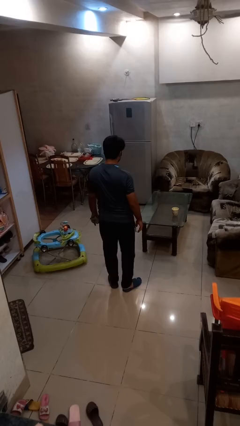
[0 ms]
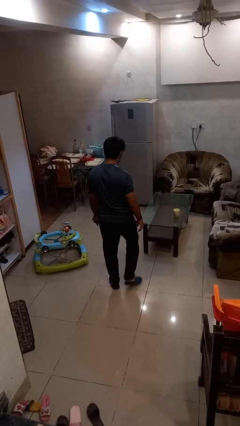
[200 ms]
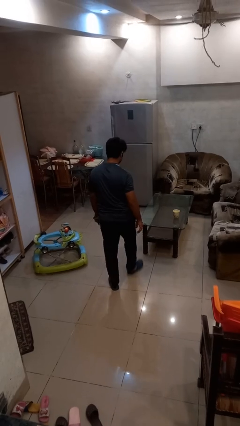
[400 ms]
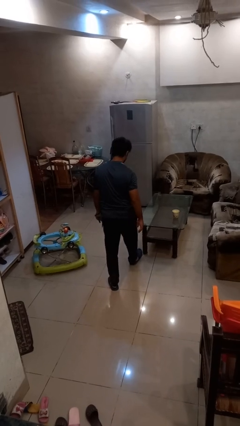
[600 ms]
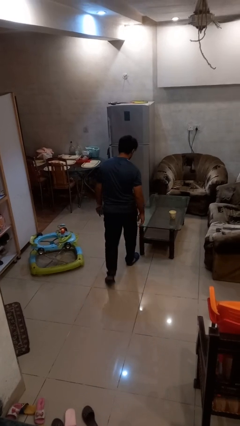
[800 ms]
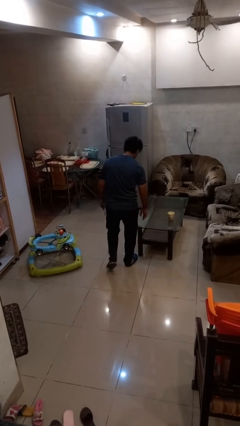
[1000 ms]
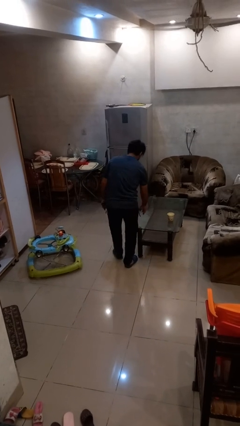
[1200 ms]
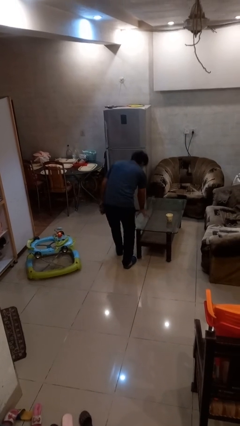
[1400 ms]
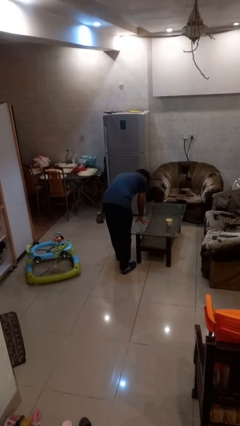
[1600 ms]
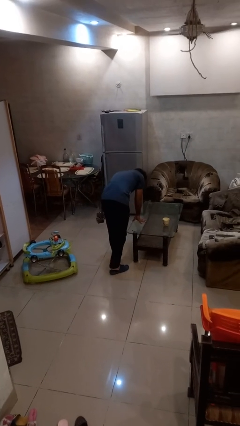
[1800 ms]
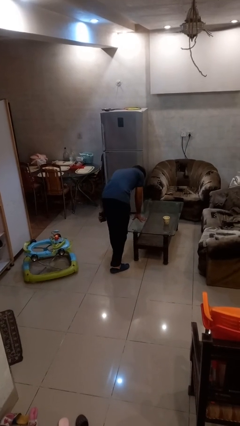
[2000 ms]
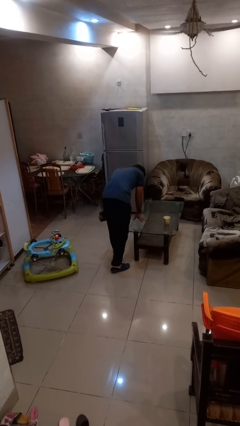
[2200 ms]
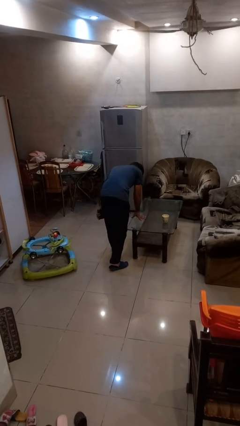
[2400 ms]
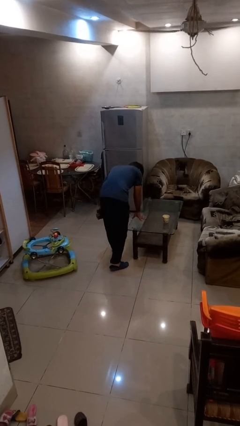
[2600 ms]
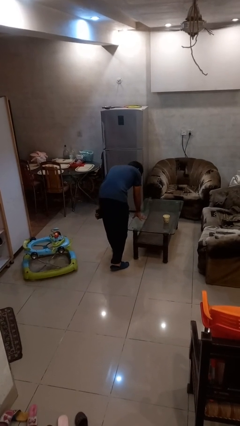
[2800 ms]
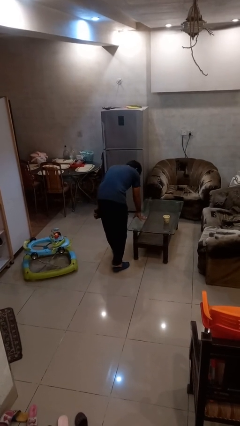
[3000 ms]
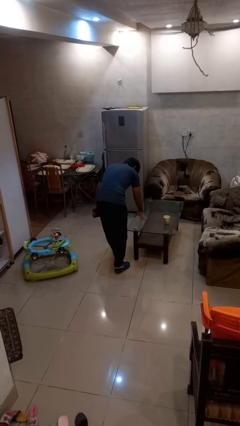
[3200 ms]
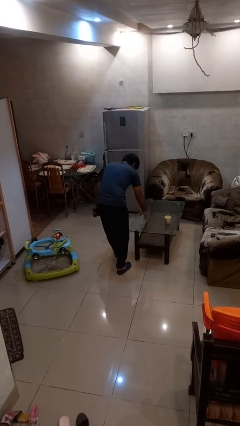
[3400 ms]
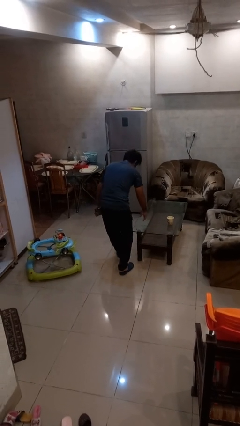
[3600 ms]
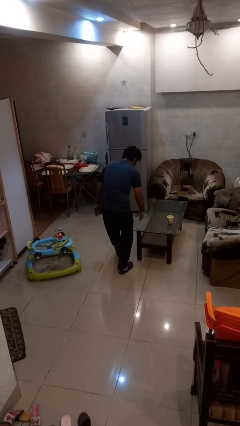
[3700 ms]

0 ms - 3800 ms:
person bumps into table

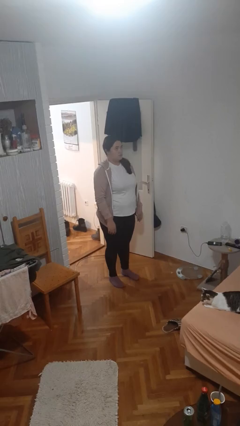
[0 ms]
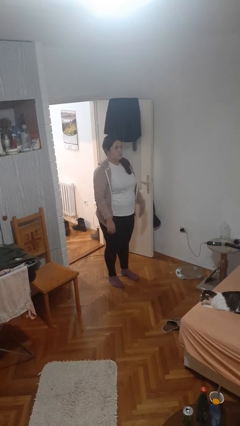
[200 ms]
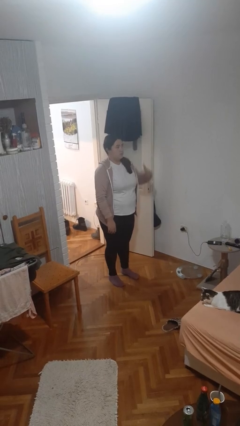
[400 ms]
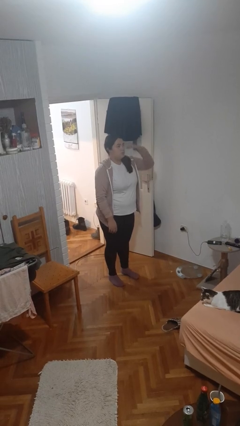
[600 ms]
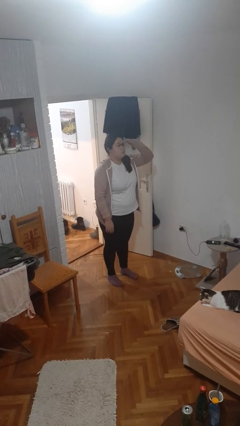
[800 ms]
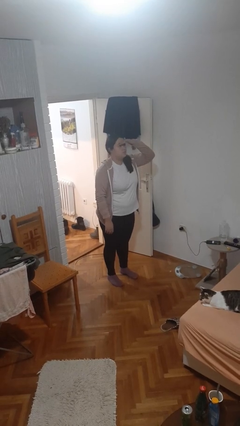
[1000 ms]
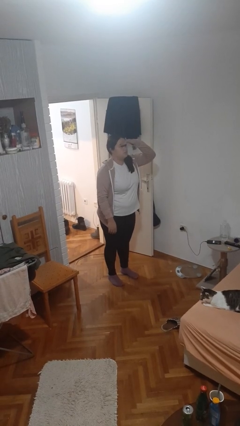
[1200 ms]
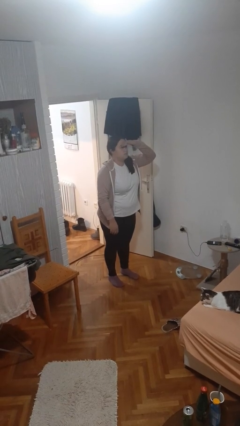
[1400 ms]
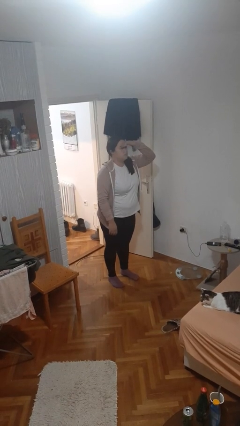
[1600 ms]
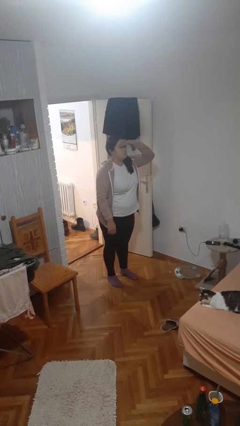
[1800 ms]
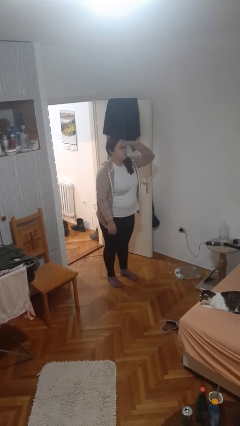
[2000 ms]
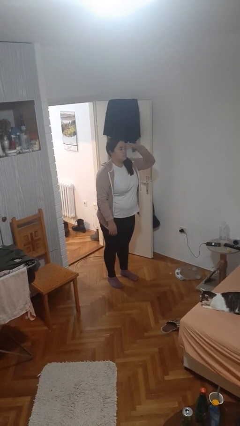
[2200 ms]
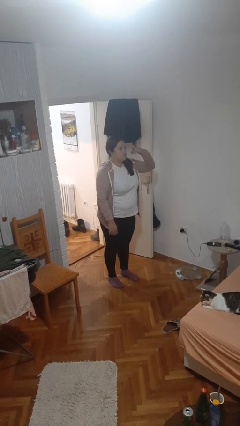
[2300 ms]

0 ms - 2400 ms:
person shades eyes

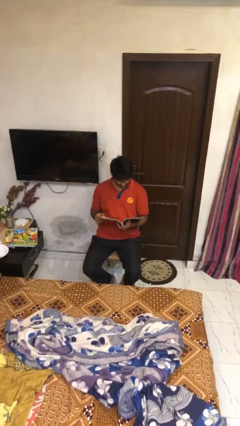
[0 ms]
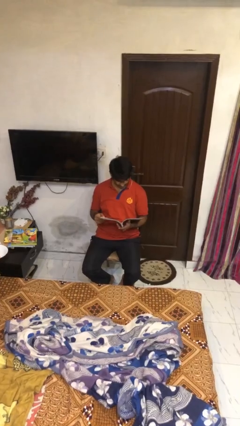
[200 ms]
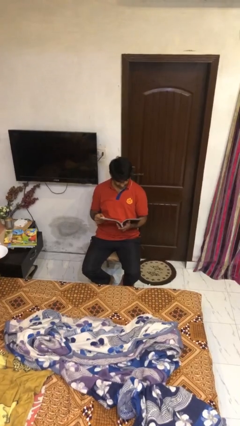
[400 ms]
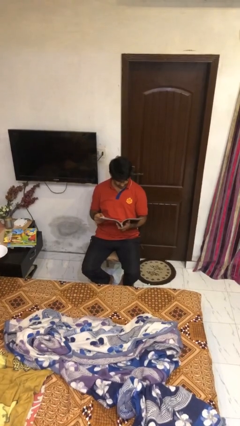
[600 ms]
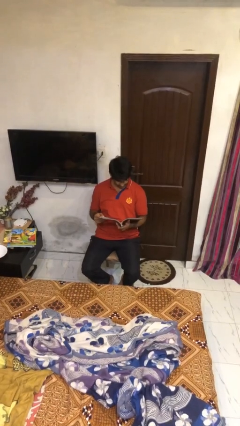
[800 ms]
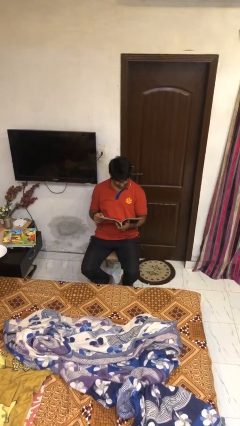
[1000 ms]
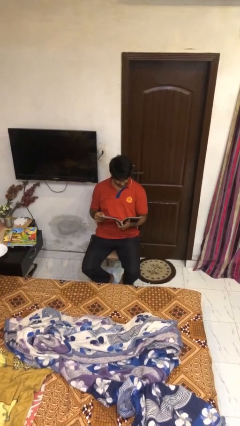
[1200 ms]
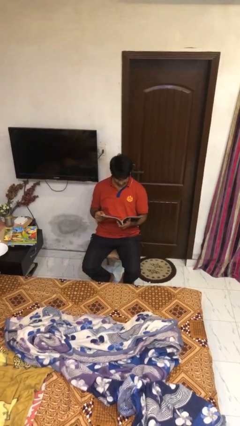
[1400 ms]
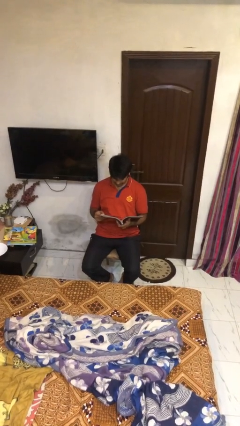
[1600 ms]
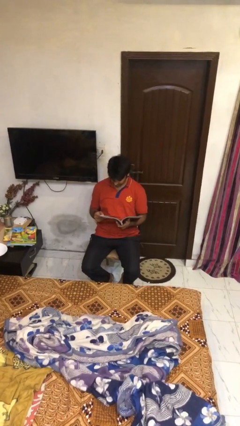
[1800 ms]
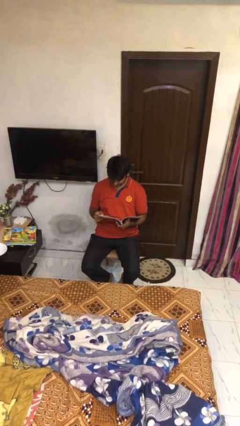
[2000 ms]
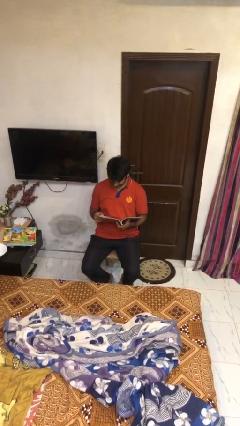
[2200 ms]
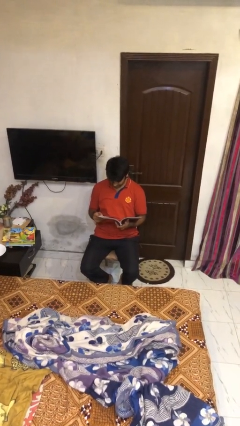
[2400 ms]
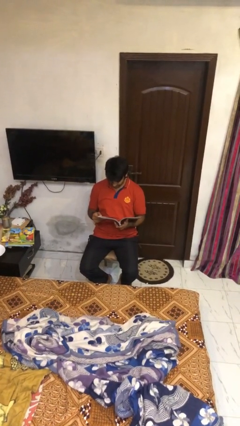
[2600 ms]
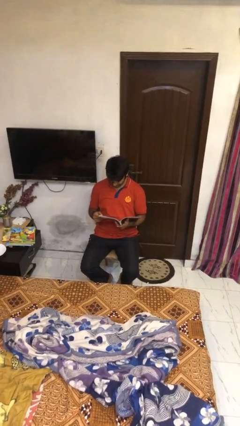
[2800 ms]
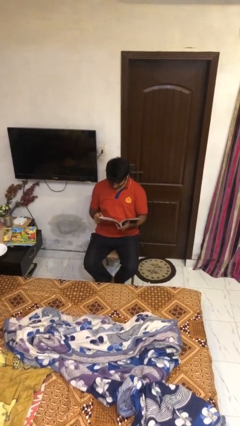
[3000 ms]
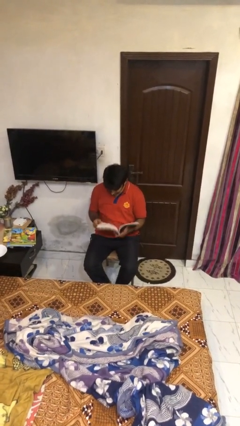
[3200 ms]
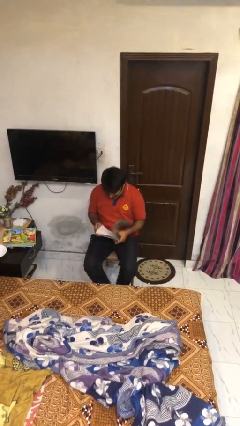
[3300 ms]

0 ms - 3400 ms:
person reads document

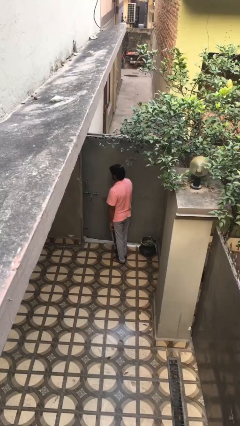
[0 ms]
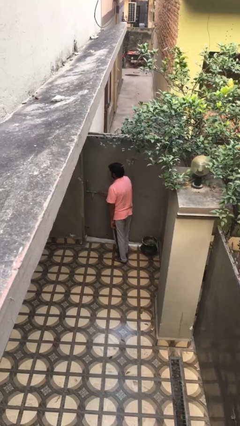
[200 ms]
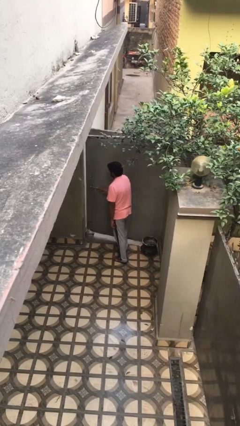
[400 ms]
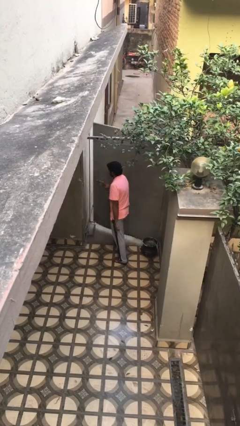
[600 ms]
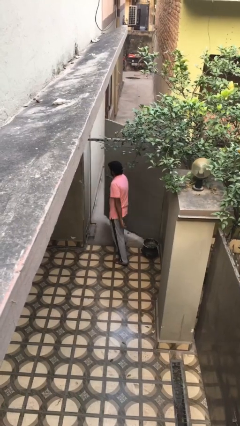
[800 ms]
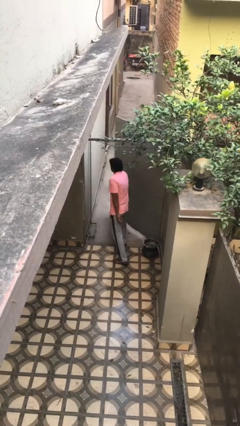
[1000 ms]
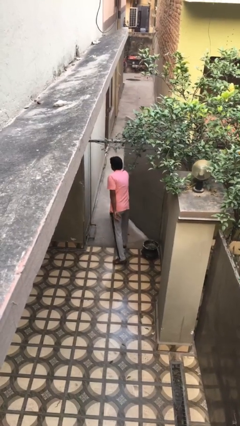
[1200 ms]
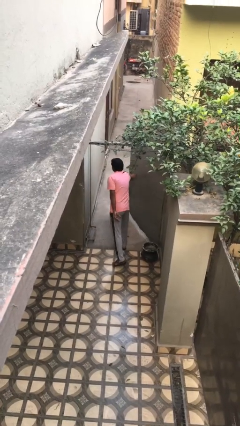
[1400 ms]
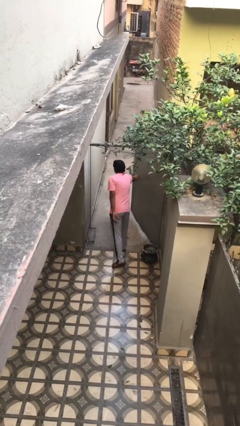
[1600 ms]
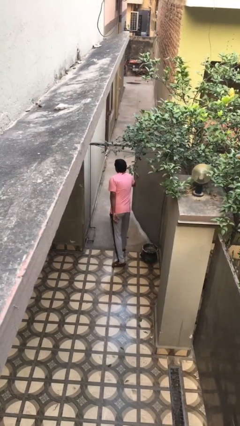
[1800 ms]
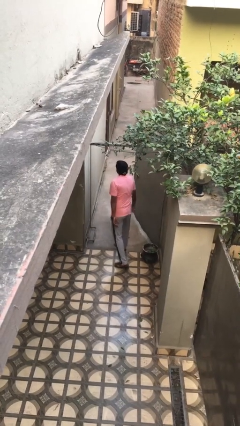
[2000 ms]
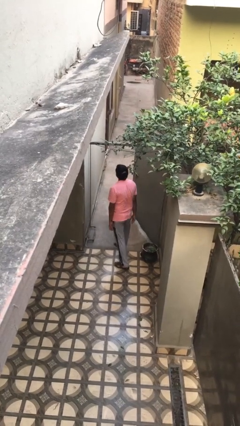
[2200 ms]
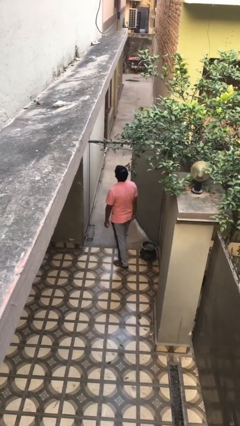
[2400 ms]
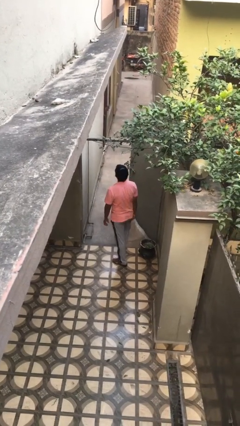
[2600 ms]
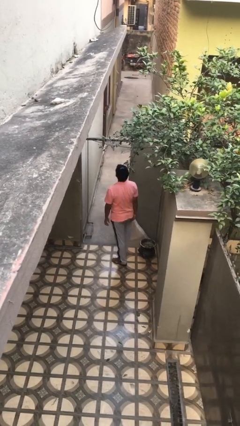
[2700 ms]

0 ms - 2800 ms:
person opens facility door

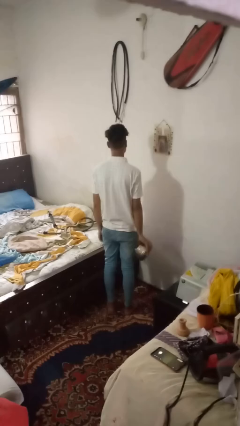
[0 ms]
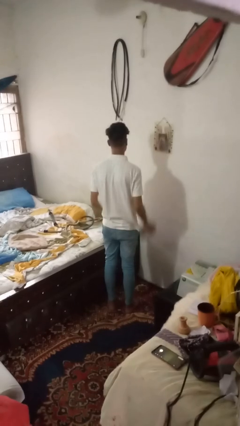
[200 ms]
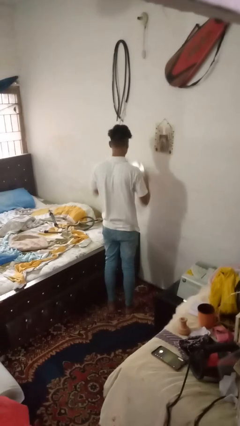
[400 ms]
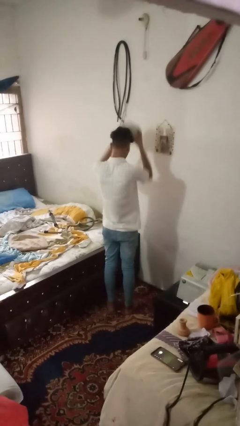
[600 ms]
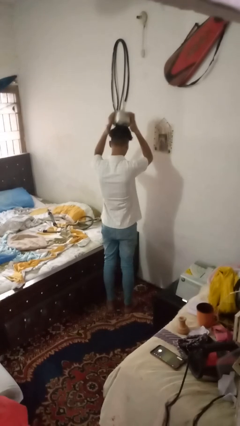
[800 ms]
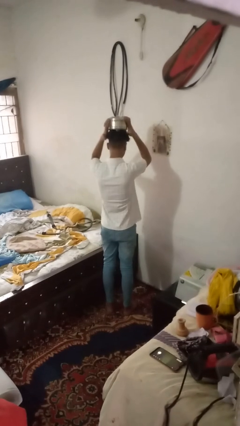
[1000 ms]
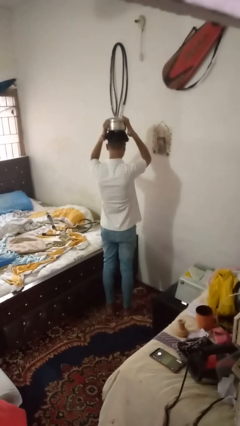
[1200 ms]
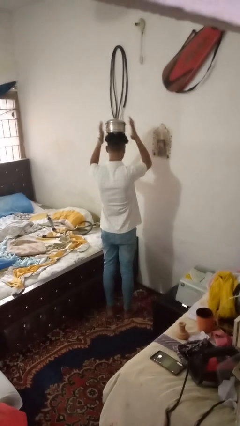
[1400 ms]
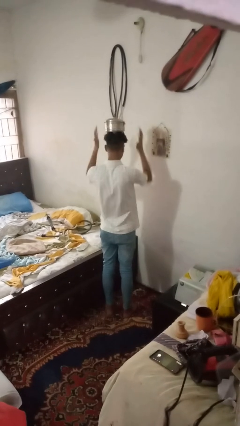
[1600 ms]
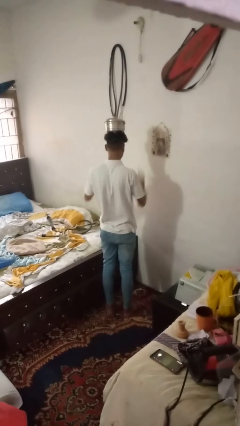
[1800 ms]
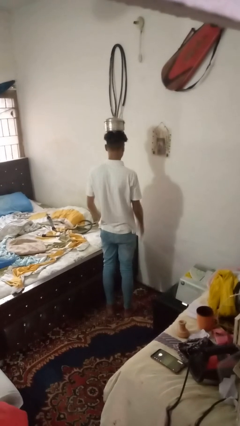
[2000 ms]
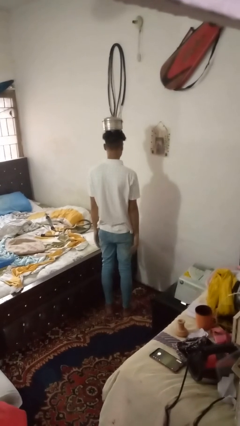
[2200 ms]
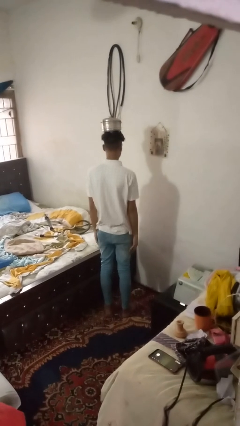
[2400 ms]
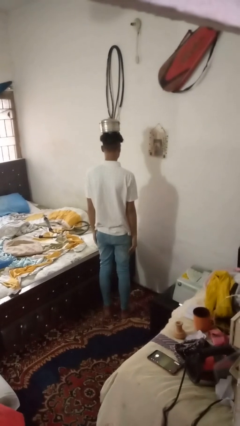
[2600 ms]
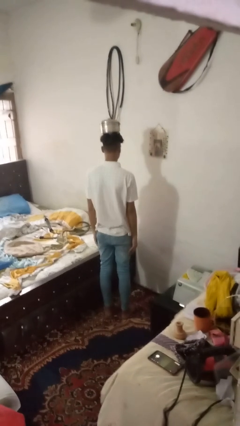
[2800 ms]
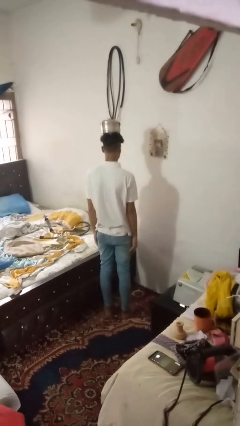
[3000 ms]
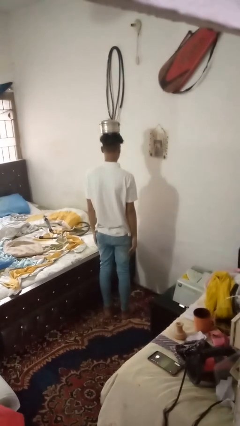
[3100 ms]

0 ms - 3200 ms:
person holds object above head

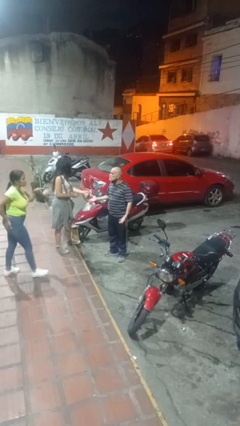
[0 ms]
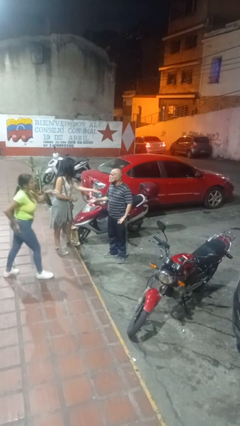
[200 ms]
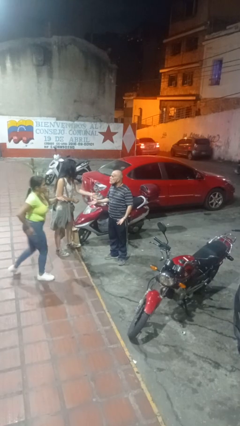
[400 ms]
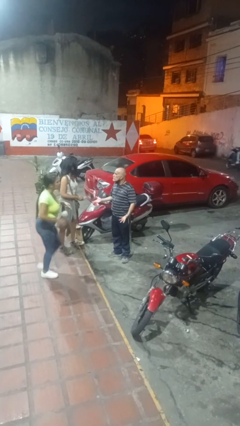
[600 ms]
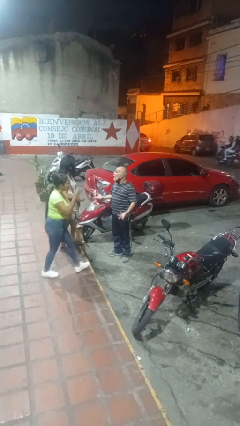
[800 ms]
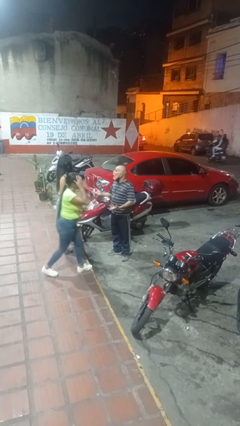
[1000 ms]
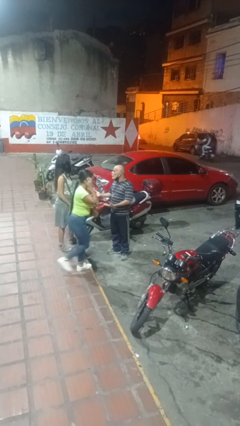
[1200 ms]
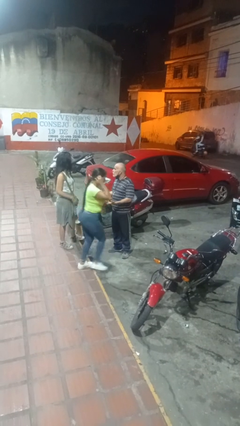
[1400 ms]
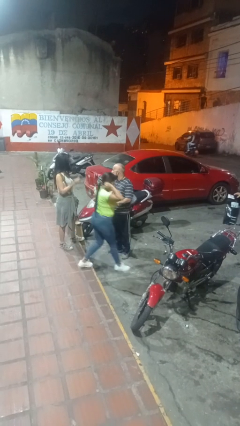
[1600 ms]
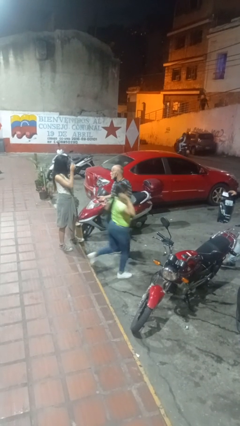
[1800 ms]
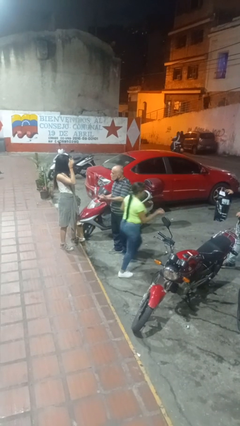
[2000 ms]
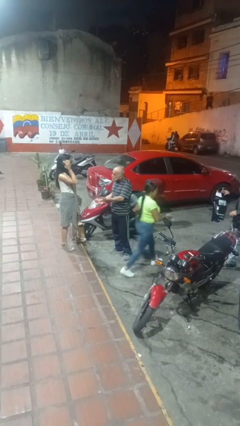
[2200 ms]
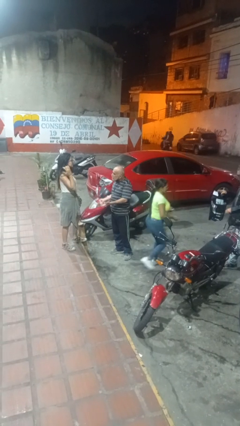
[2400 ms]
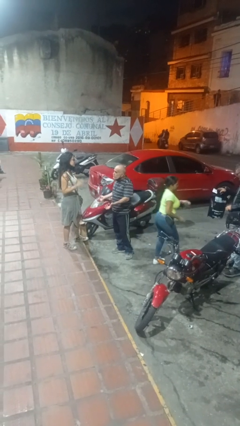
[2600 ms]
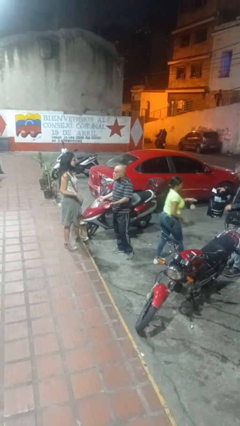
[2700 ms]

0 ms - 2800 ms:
person talks to person
